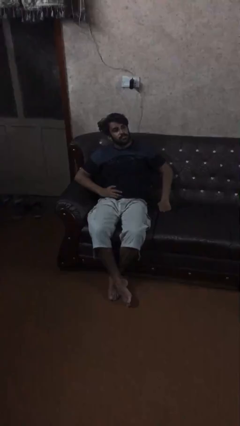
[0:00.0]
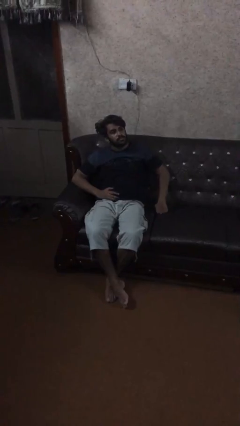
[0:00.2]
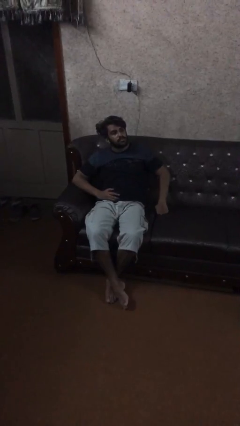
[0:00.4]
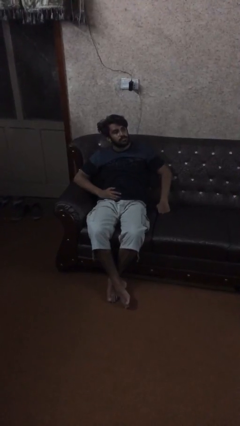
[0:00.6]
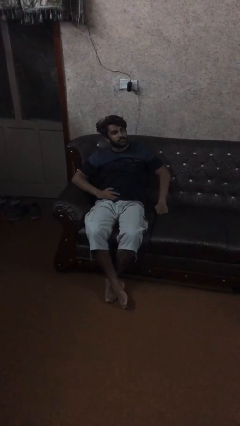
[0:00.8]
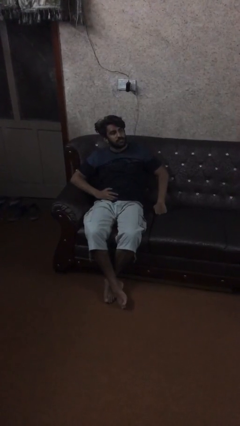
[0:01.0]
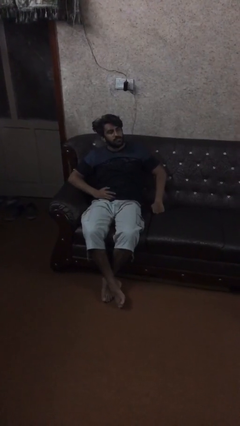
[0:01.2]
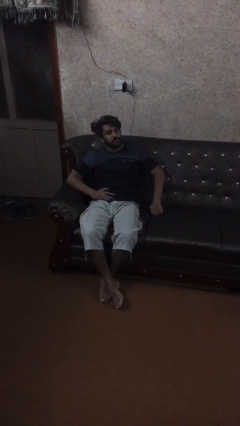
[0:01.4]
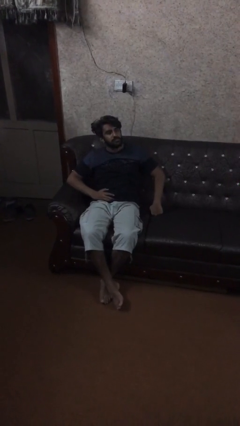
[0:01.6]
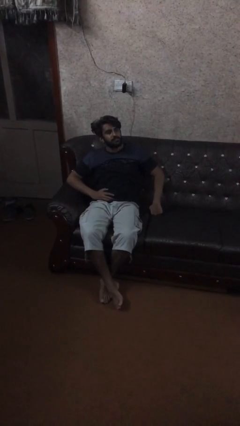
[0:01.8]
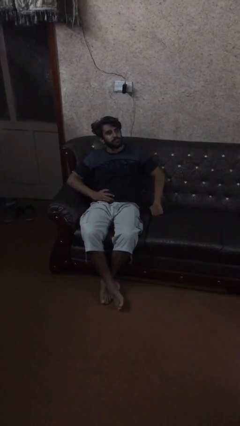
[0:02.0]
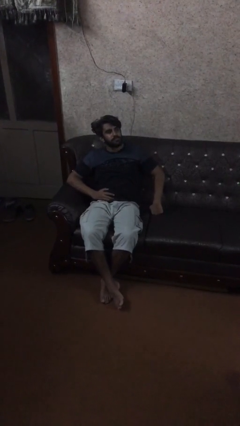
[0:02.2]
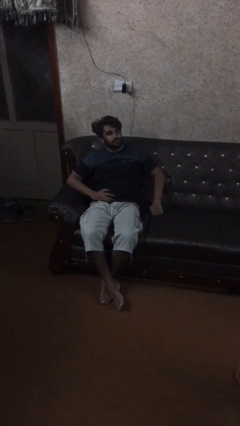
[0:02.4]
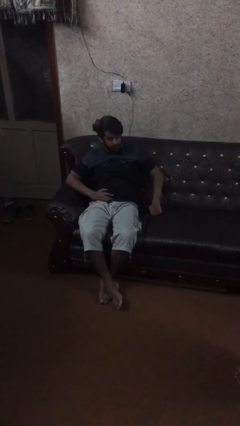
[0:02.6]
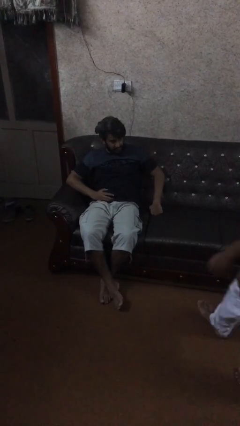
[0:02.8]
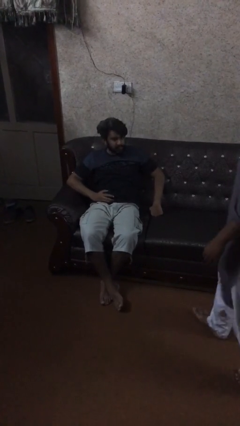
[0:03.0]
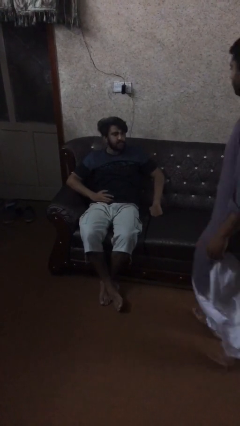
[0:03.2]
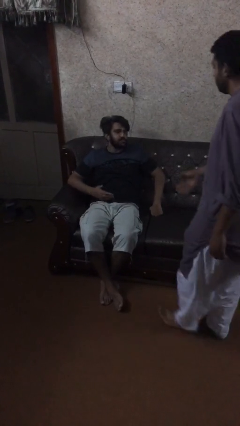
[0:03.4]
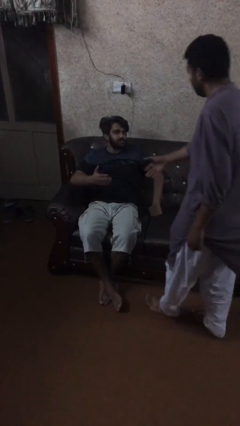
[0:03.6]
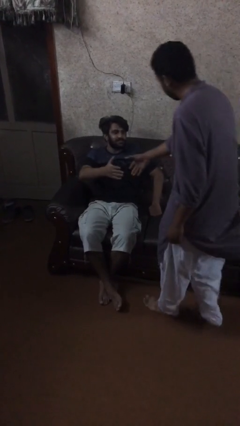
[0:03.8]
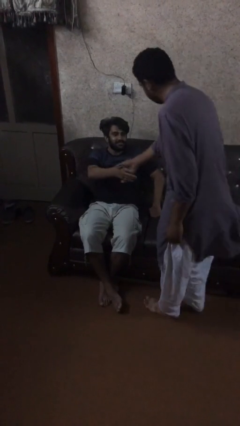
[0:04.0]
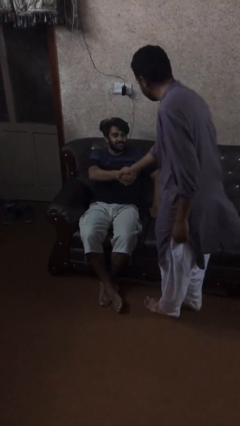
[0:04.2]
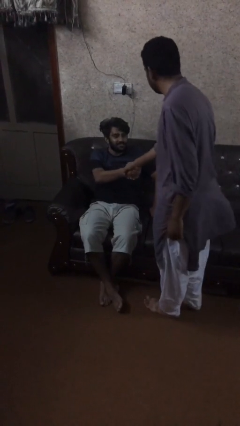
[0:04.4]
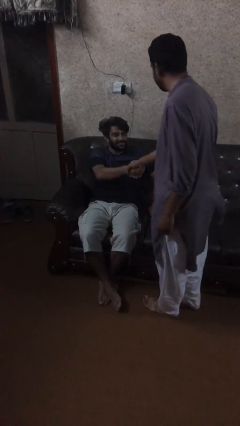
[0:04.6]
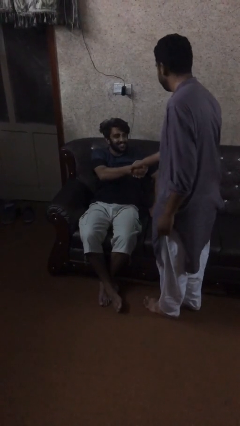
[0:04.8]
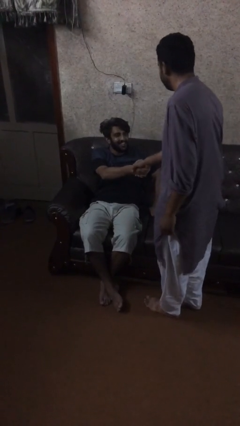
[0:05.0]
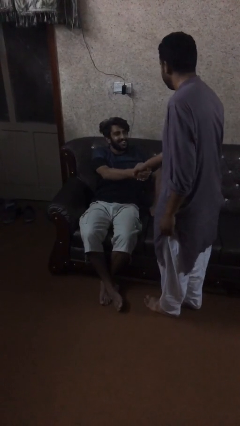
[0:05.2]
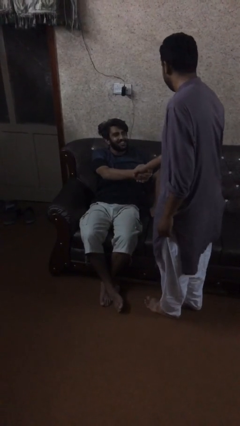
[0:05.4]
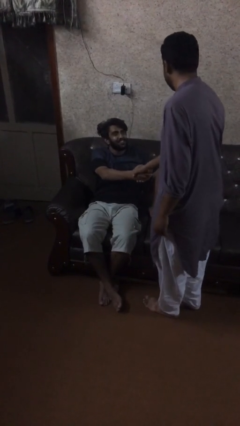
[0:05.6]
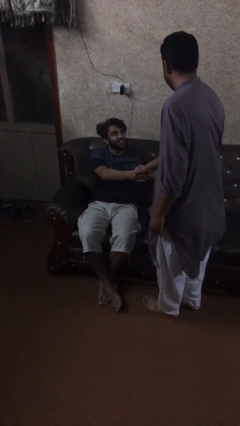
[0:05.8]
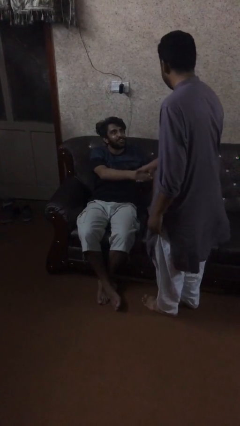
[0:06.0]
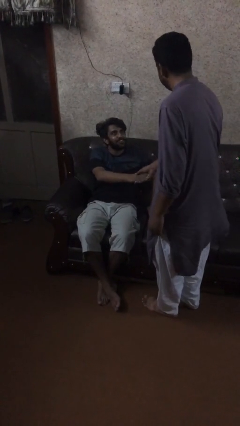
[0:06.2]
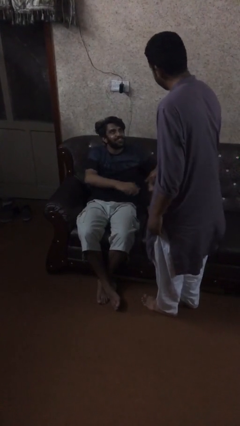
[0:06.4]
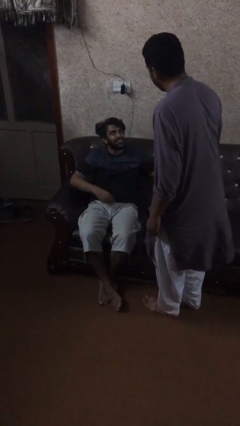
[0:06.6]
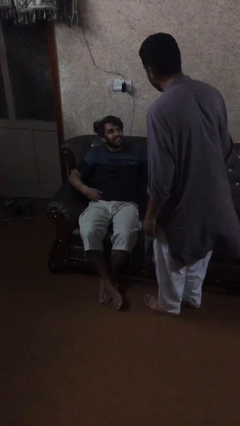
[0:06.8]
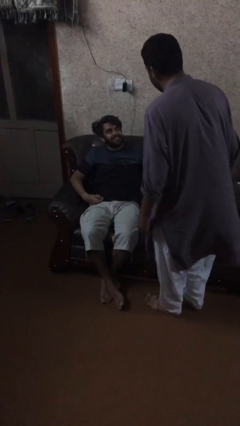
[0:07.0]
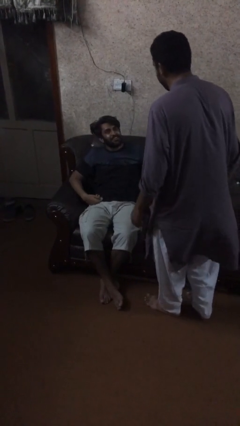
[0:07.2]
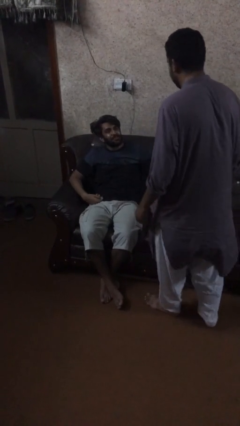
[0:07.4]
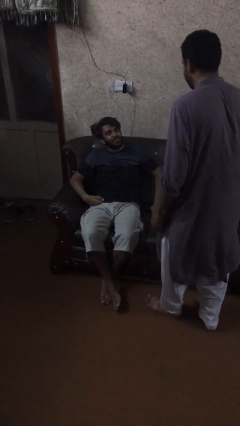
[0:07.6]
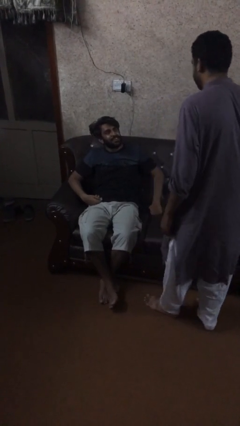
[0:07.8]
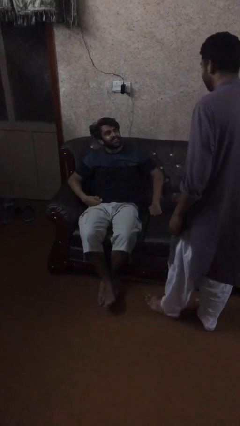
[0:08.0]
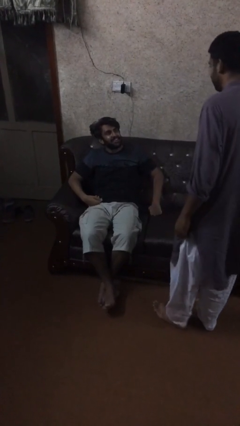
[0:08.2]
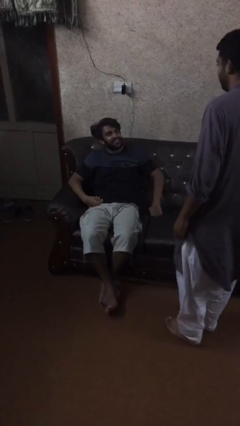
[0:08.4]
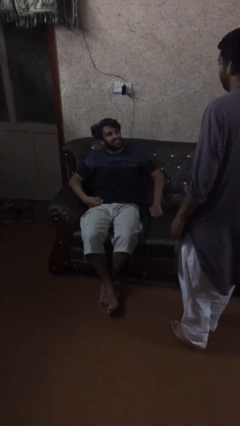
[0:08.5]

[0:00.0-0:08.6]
person shakes hand

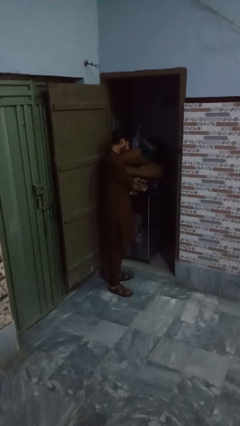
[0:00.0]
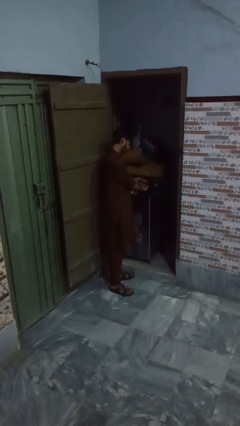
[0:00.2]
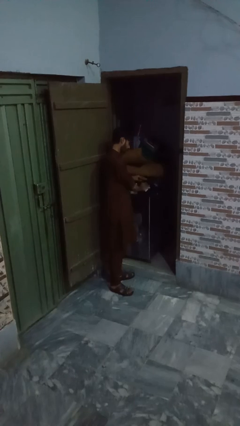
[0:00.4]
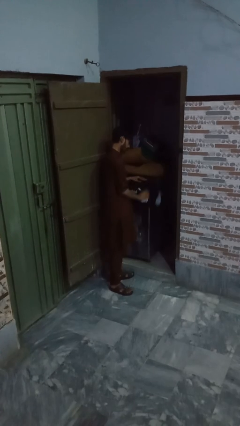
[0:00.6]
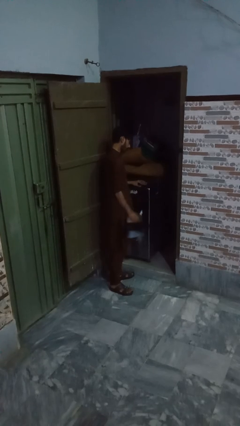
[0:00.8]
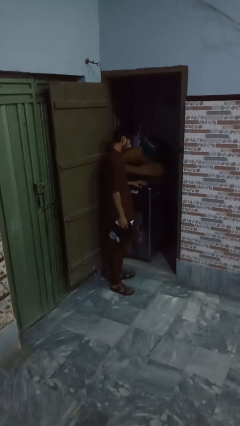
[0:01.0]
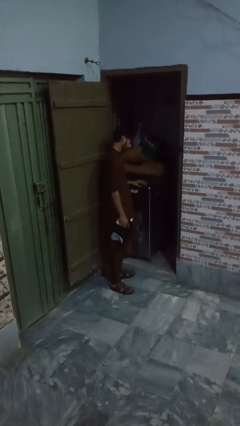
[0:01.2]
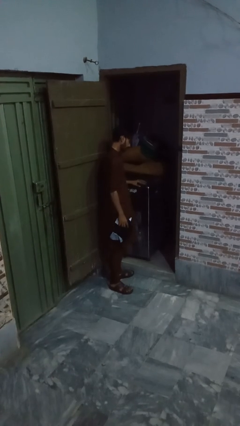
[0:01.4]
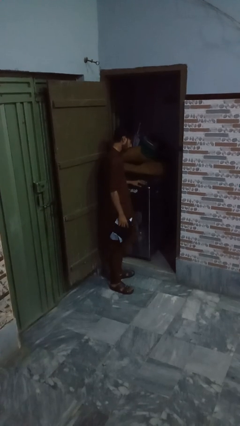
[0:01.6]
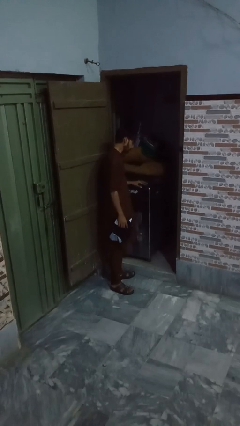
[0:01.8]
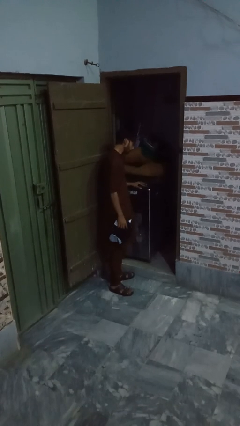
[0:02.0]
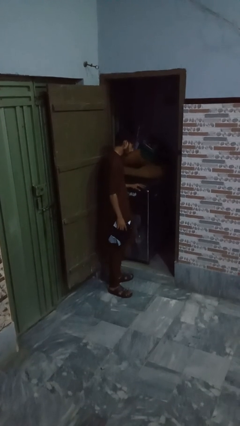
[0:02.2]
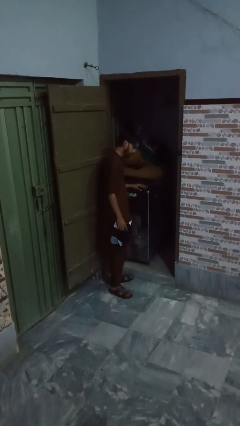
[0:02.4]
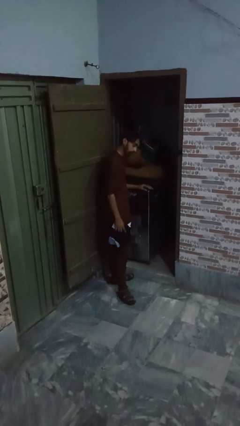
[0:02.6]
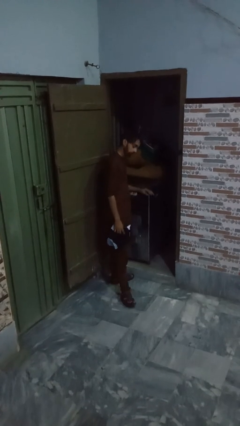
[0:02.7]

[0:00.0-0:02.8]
person unloads dryer

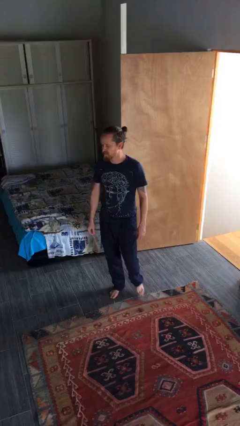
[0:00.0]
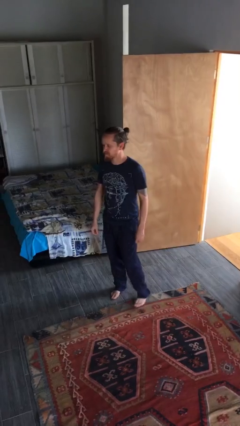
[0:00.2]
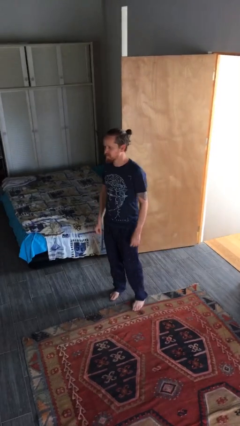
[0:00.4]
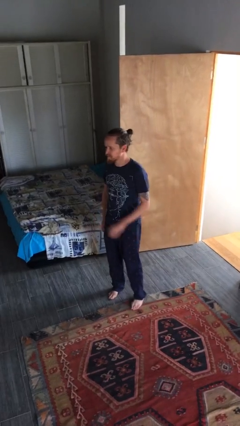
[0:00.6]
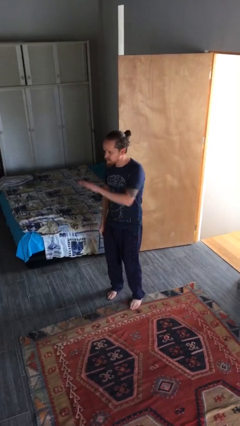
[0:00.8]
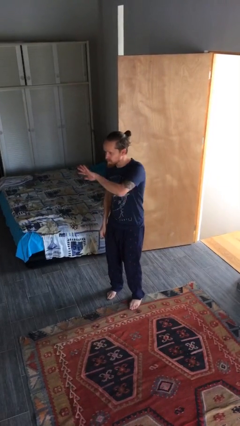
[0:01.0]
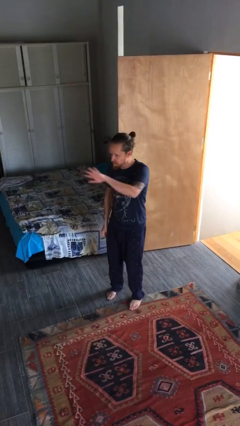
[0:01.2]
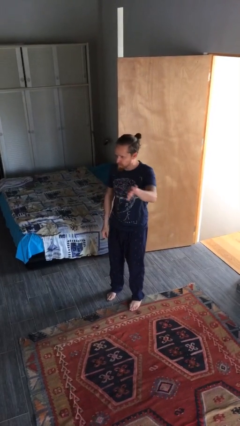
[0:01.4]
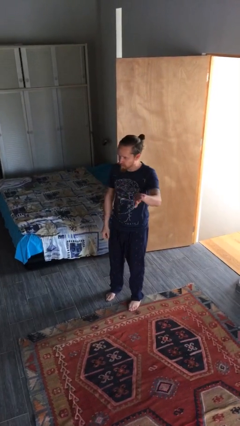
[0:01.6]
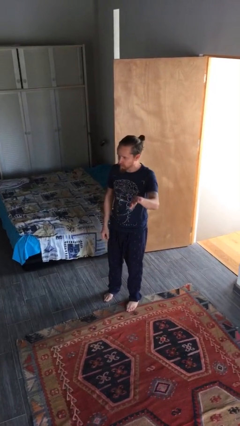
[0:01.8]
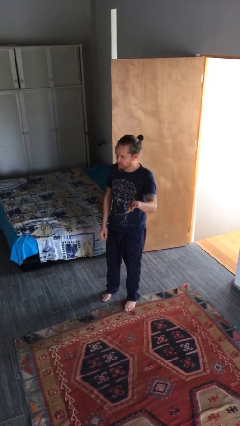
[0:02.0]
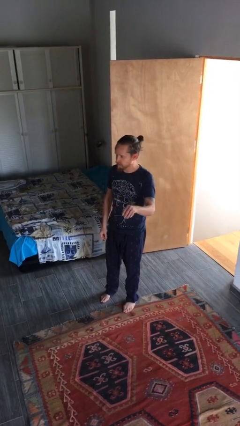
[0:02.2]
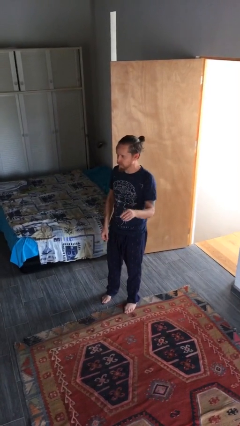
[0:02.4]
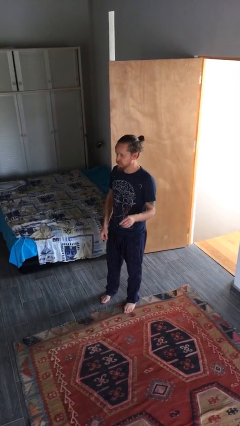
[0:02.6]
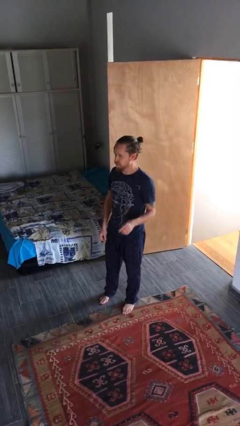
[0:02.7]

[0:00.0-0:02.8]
person gestures swipe left

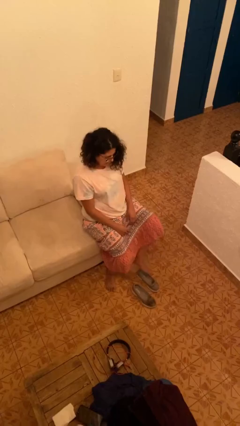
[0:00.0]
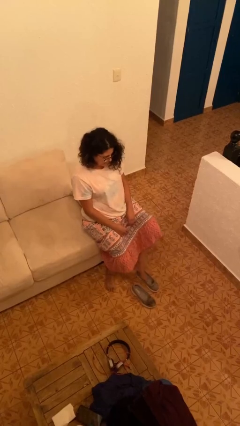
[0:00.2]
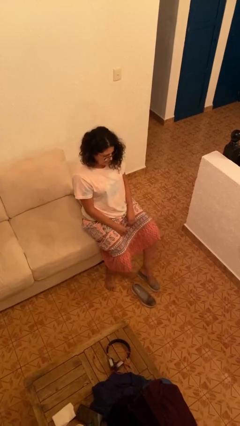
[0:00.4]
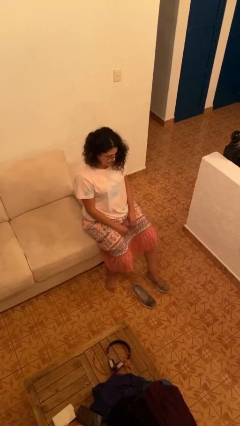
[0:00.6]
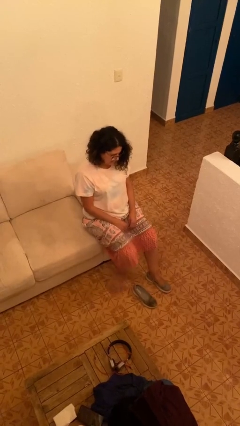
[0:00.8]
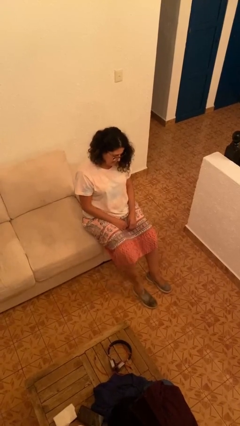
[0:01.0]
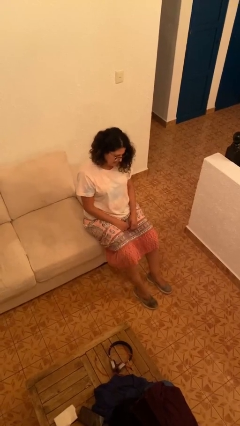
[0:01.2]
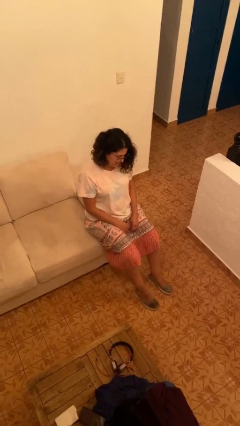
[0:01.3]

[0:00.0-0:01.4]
person puts on shoes

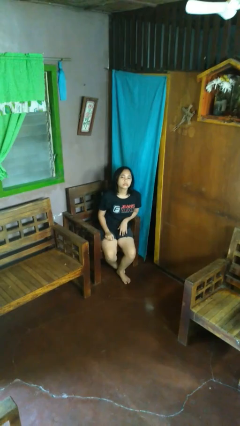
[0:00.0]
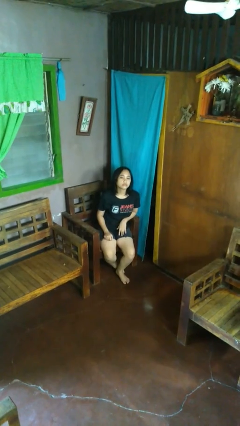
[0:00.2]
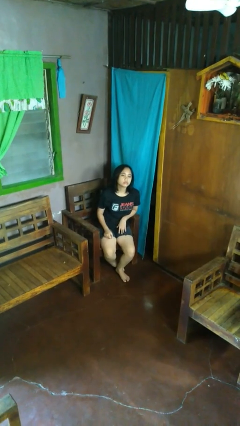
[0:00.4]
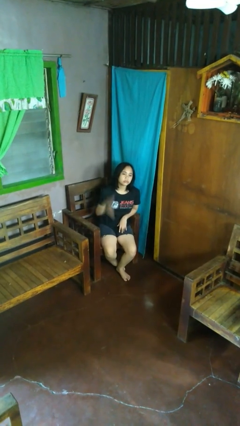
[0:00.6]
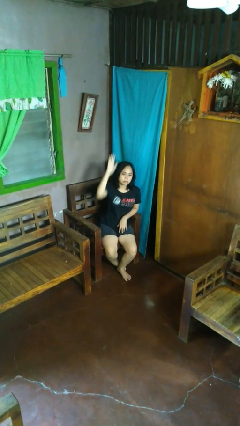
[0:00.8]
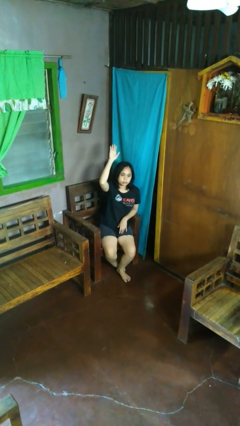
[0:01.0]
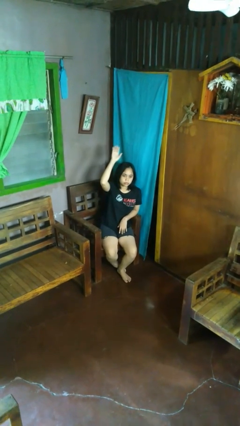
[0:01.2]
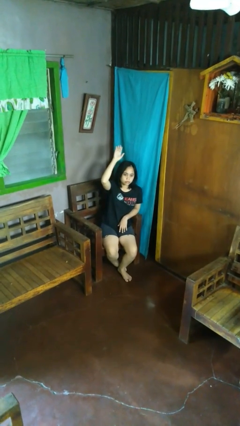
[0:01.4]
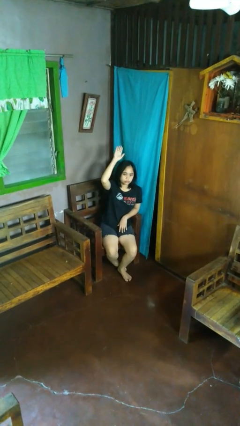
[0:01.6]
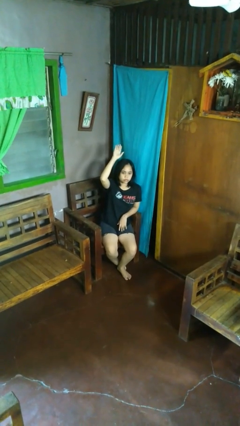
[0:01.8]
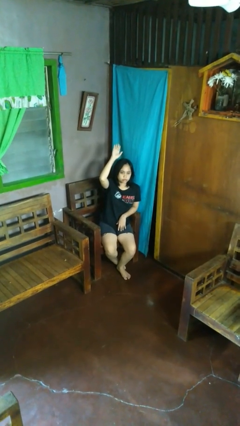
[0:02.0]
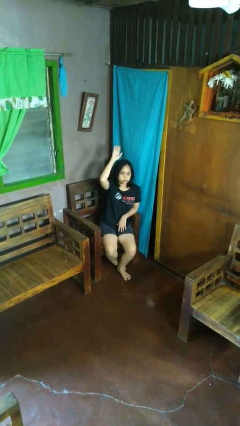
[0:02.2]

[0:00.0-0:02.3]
person gestures raise hand
